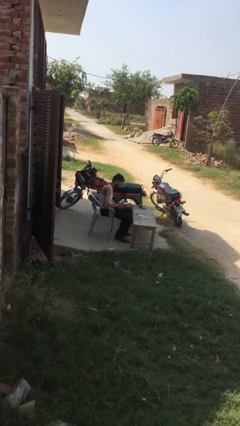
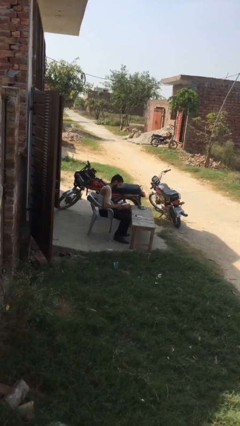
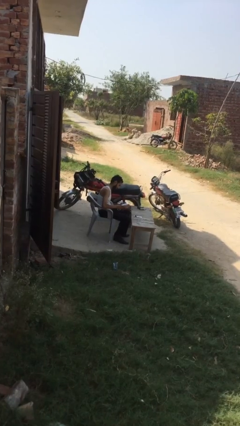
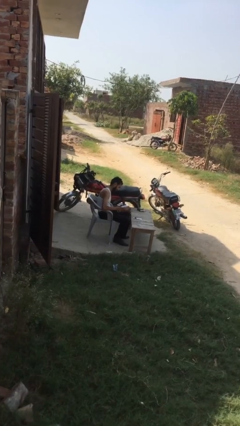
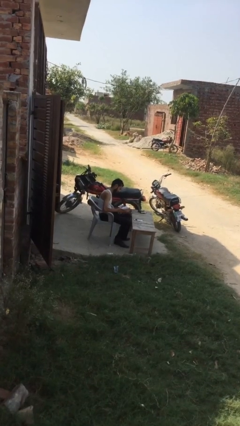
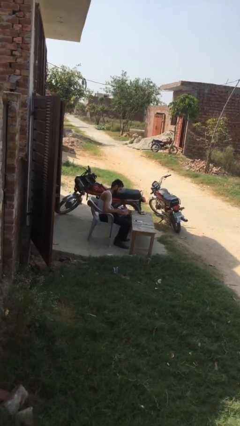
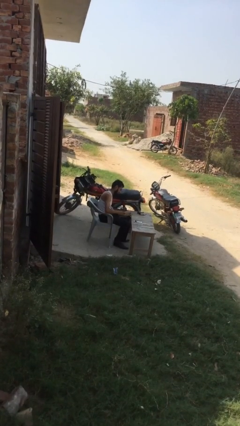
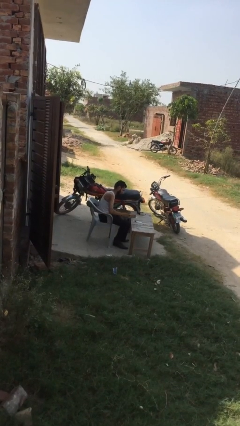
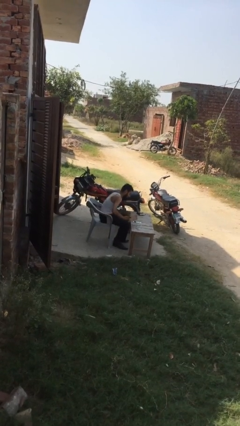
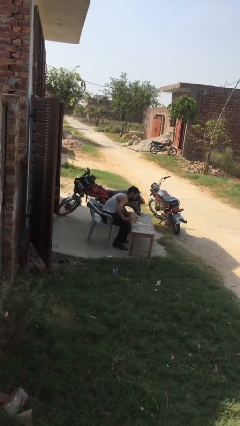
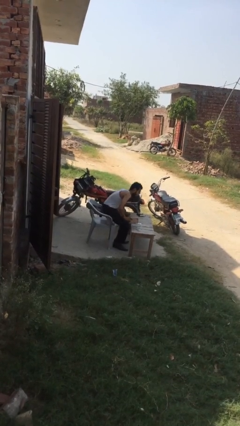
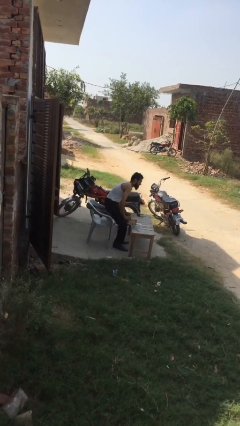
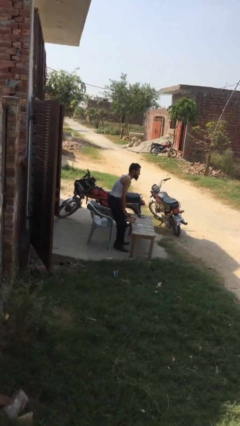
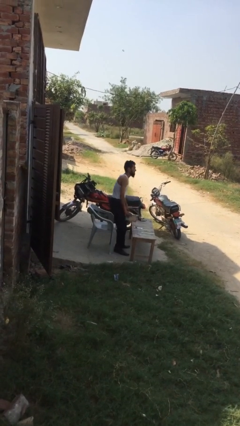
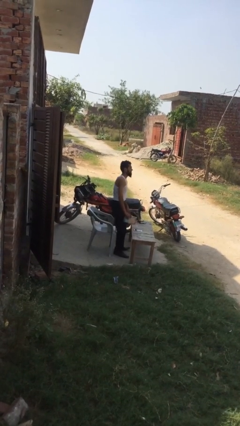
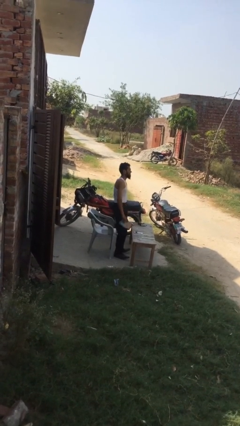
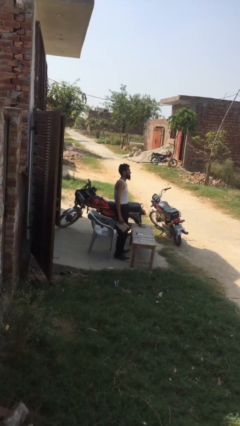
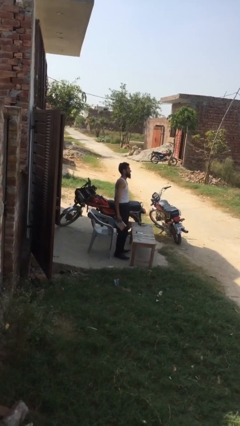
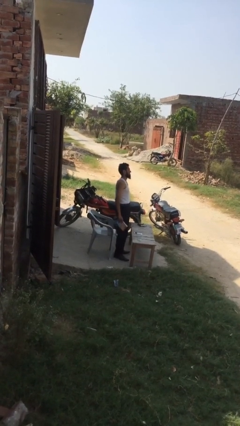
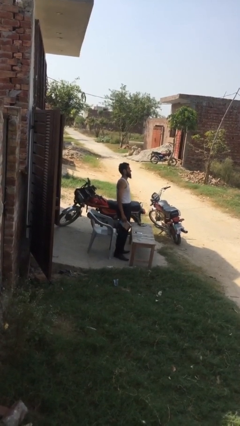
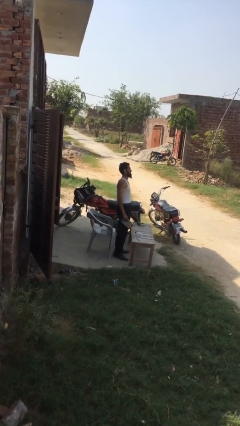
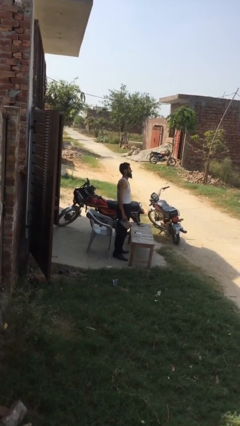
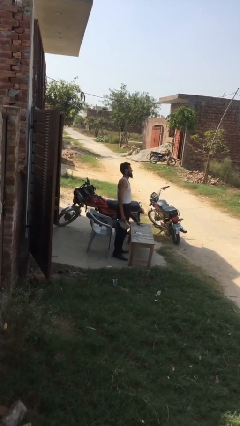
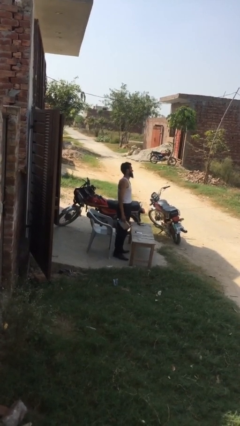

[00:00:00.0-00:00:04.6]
person stands up

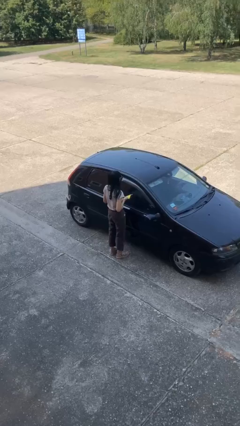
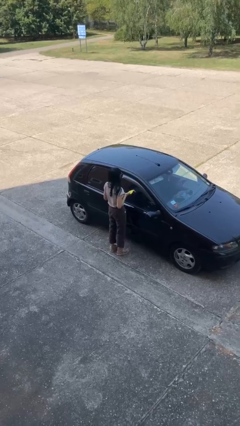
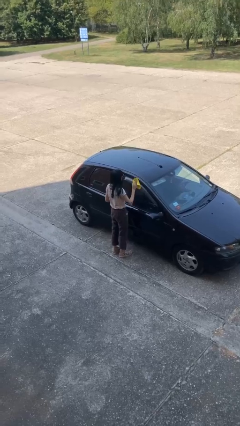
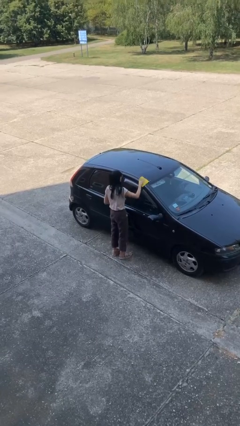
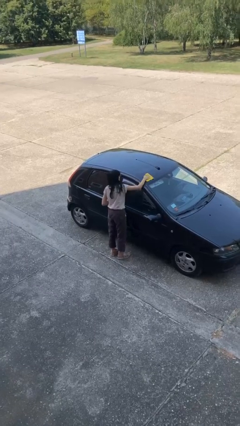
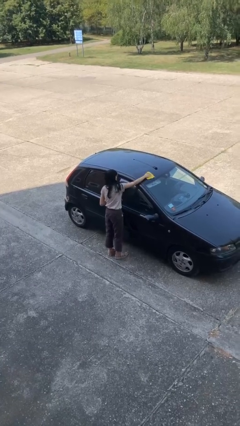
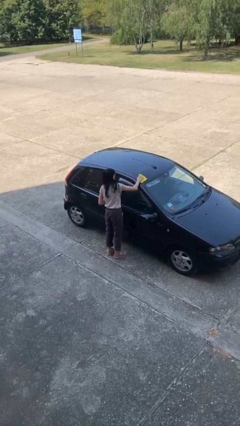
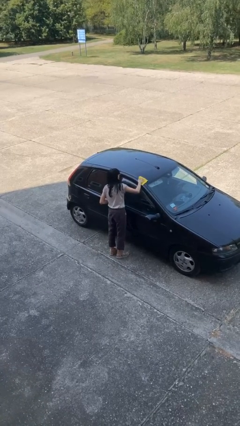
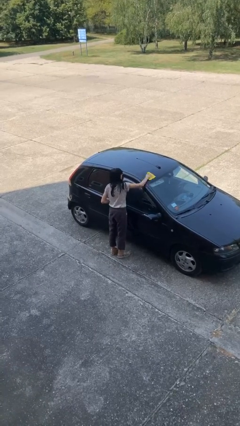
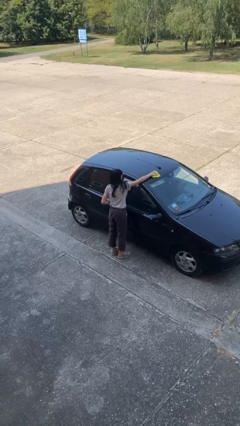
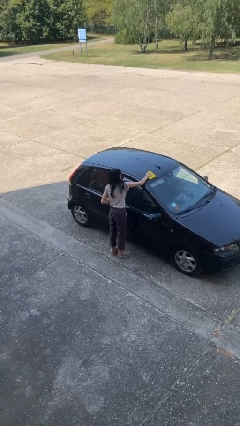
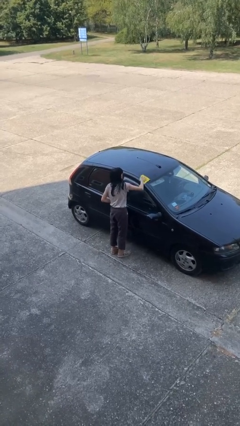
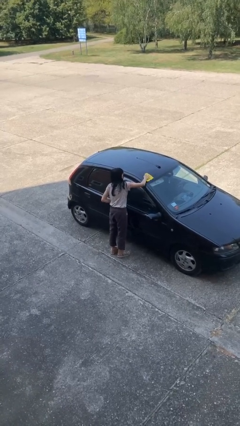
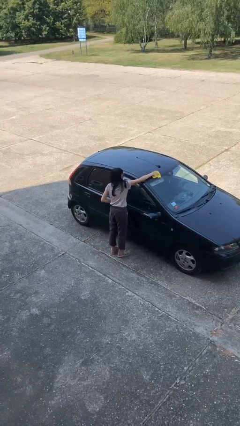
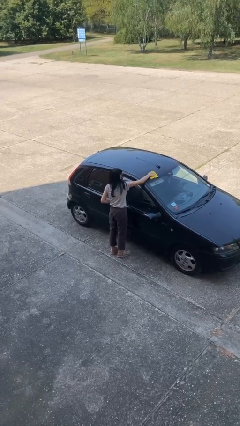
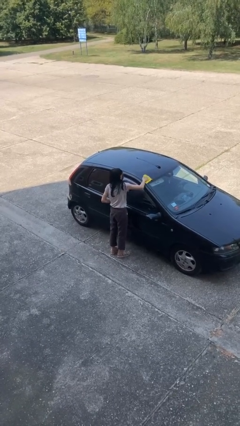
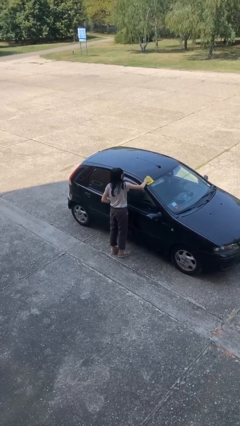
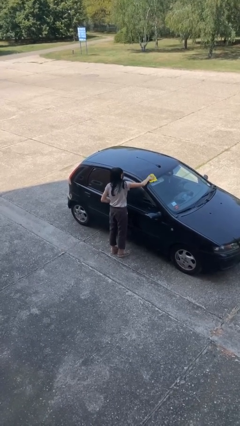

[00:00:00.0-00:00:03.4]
person polishes car with rag

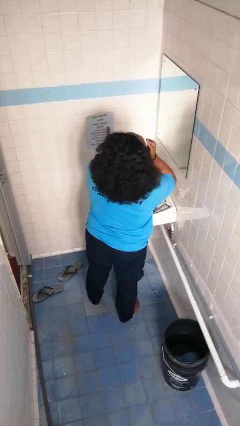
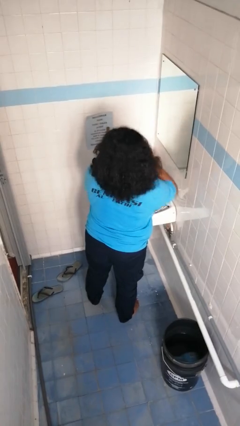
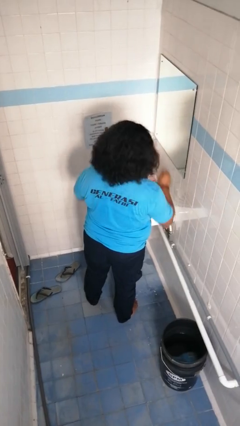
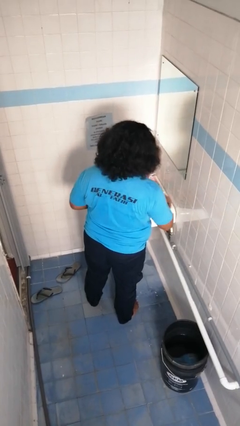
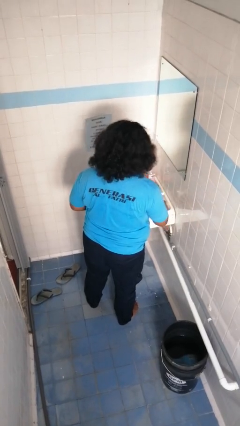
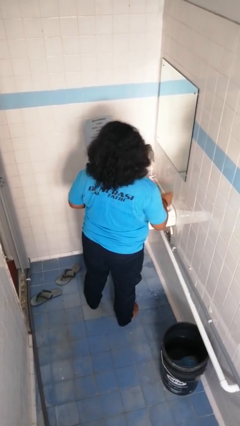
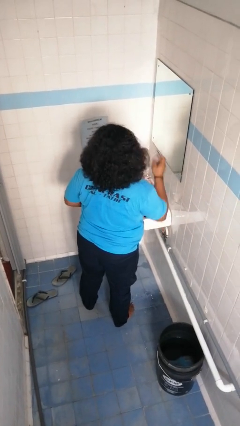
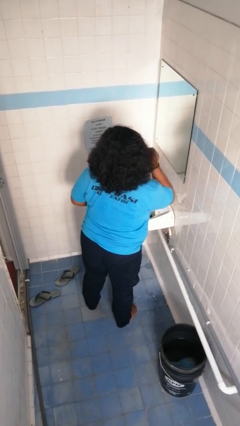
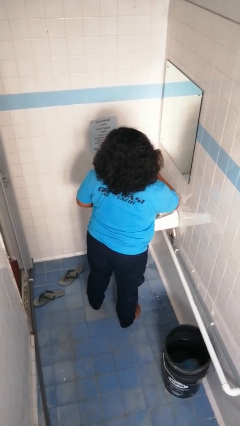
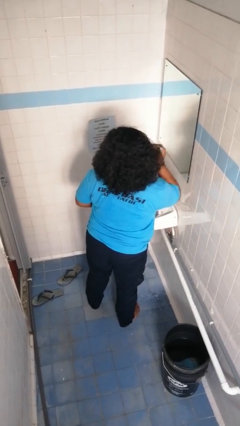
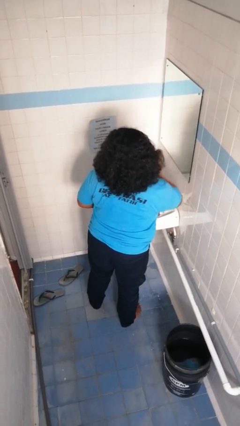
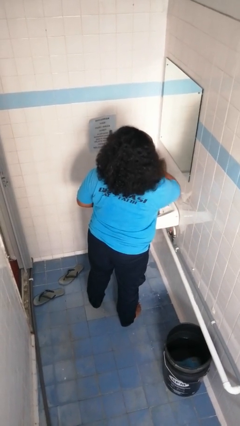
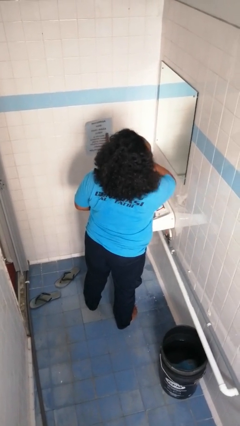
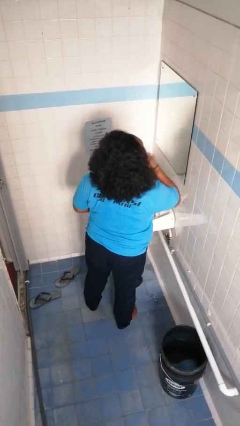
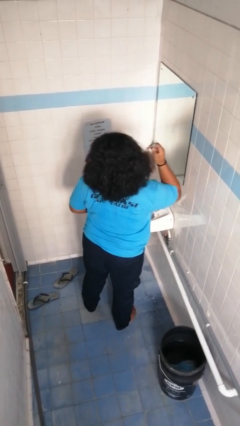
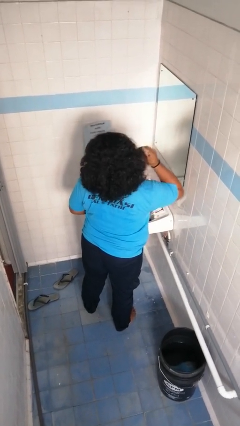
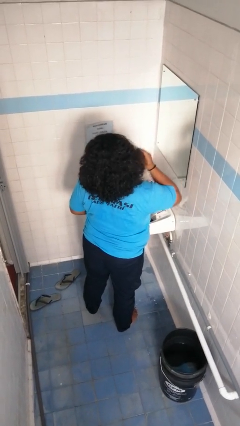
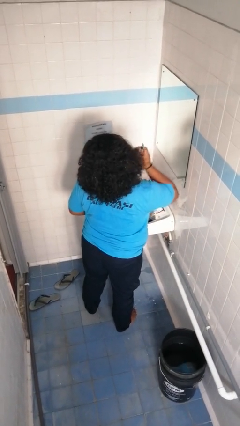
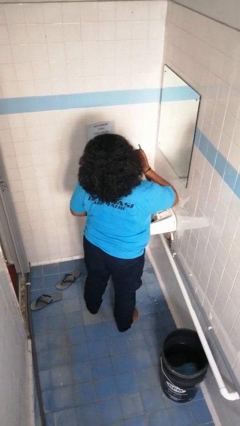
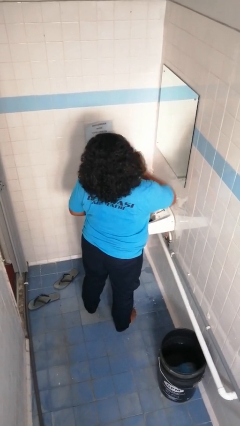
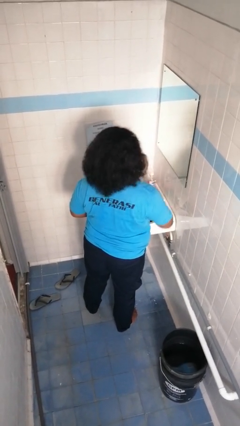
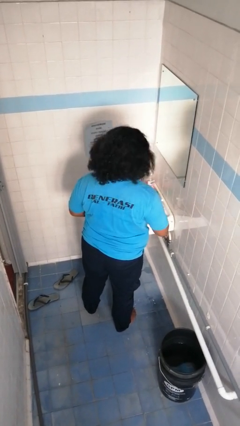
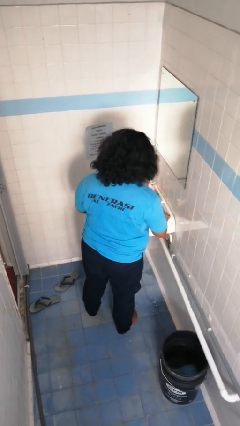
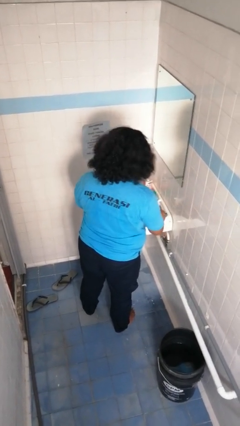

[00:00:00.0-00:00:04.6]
person shaves face

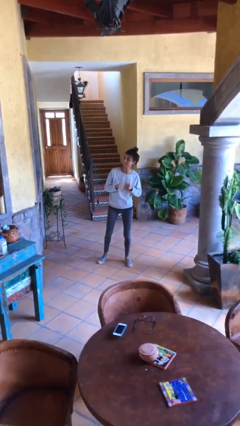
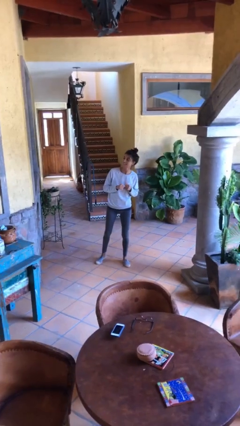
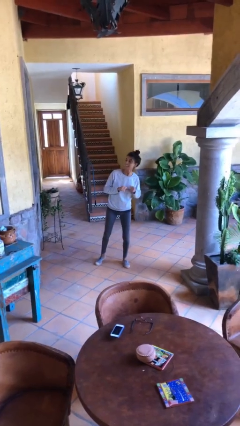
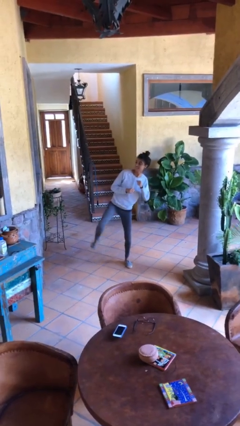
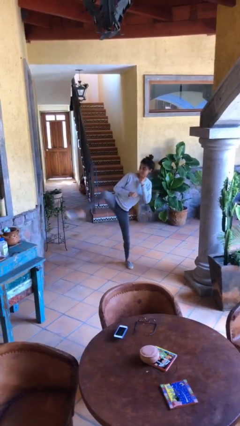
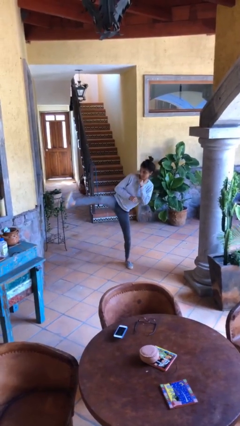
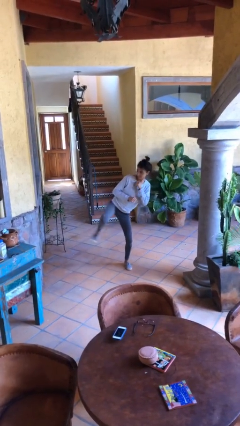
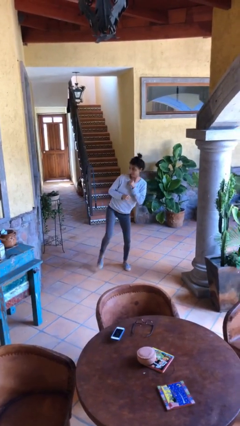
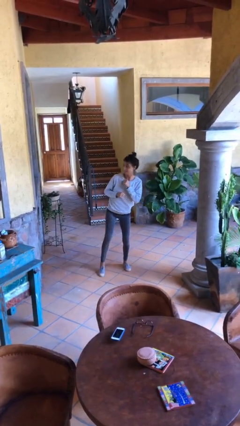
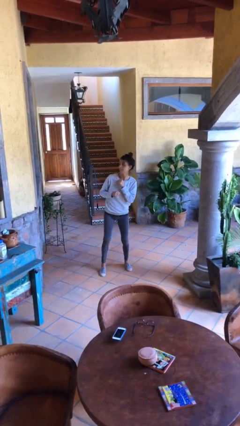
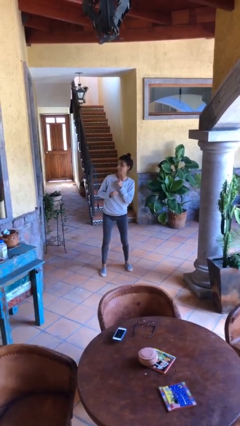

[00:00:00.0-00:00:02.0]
person karate kicks

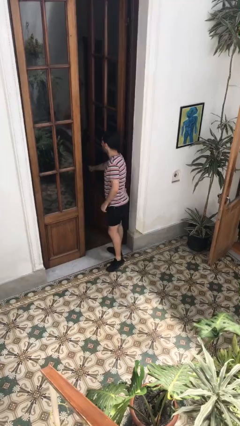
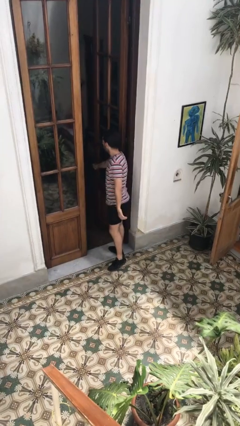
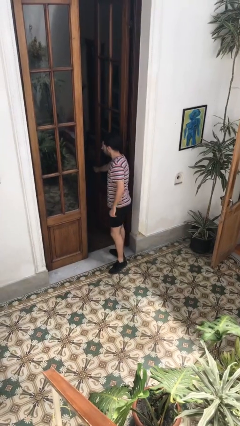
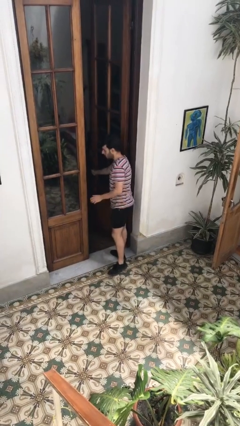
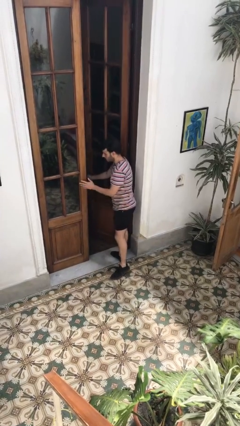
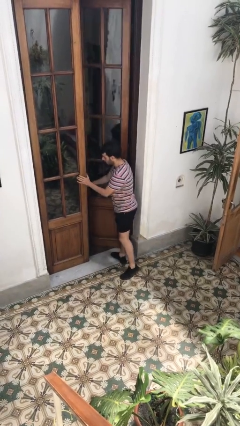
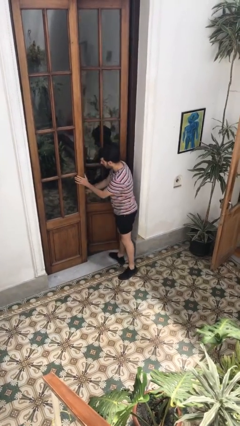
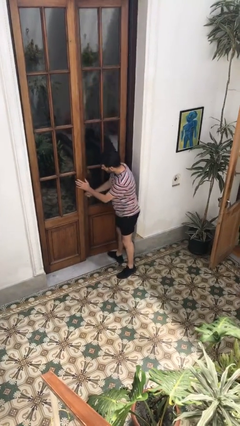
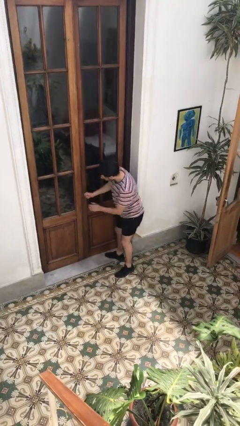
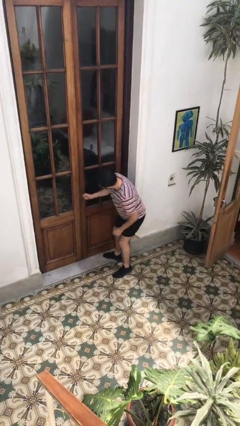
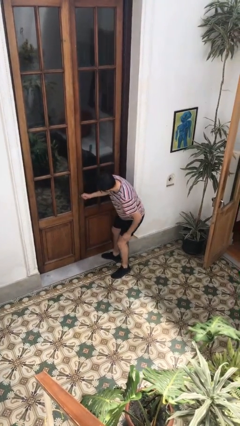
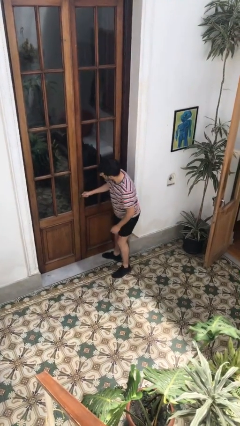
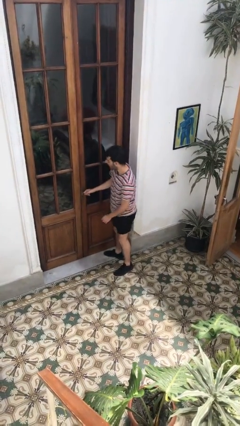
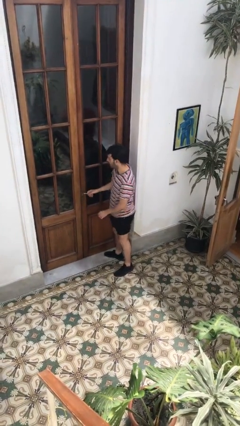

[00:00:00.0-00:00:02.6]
person closes facility door

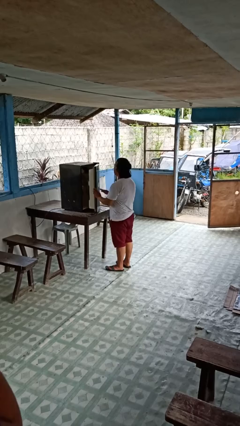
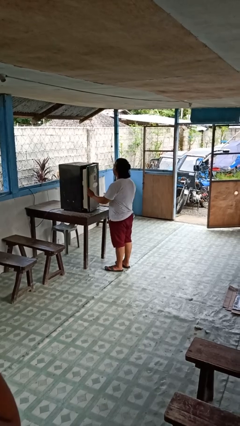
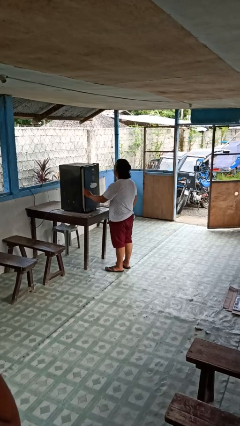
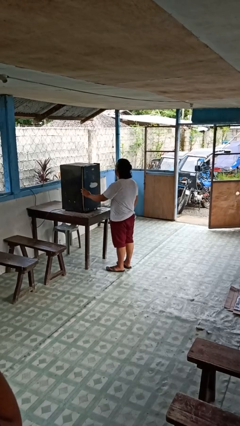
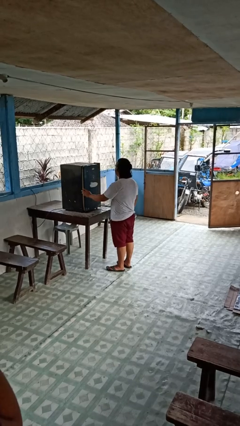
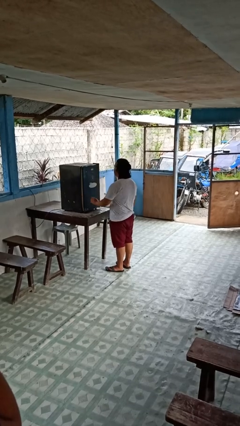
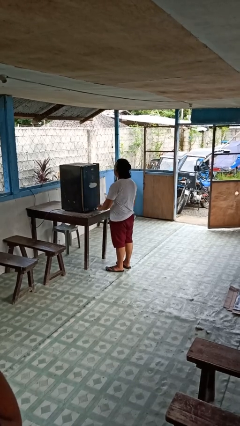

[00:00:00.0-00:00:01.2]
person closes refrigerator
